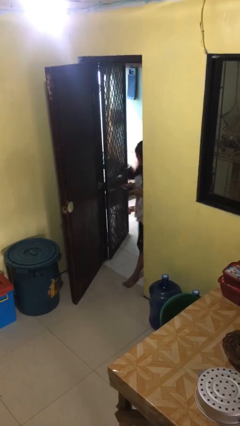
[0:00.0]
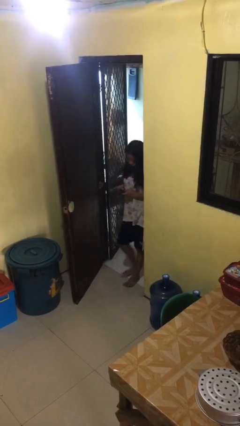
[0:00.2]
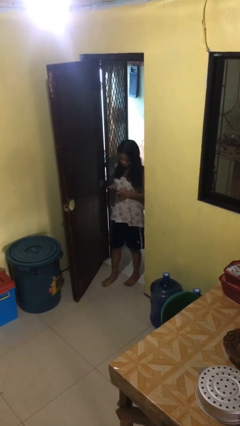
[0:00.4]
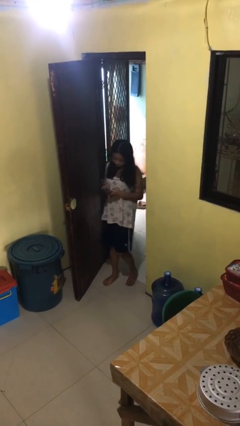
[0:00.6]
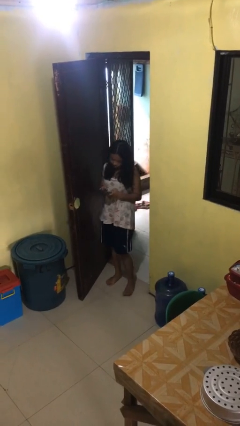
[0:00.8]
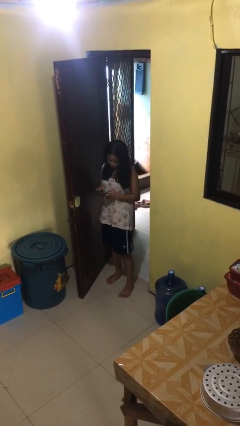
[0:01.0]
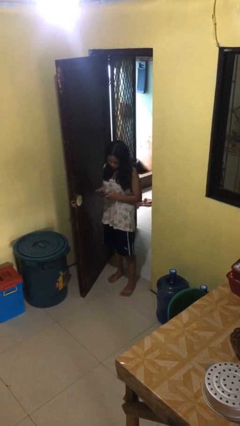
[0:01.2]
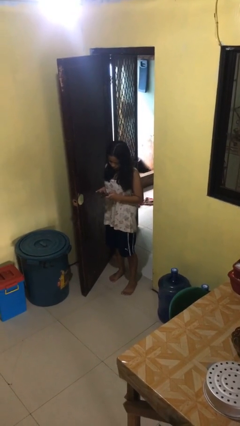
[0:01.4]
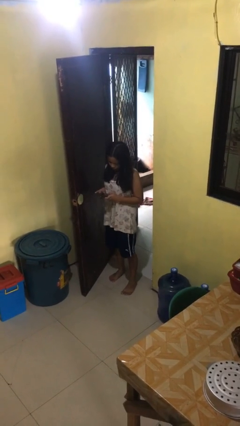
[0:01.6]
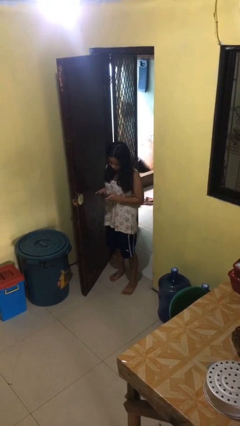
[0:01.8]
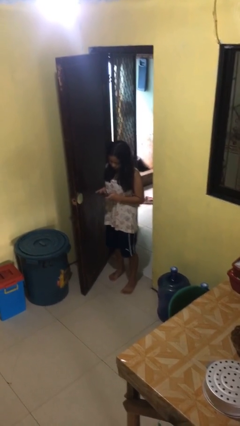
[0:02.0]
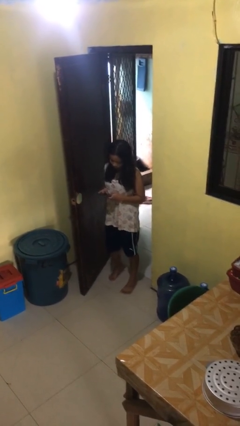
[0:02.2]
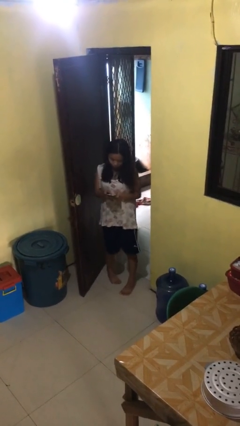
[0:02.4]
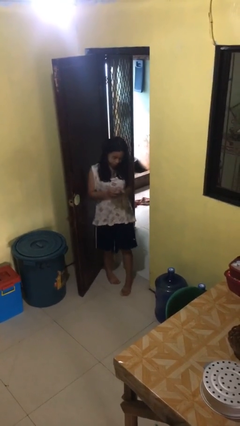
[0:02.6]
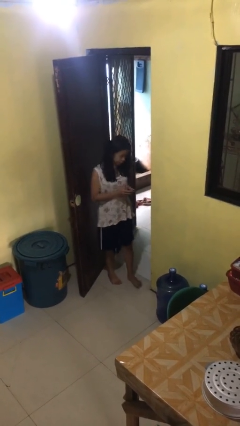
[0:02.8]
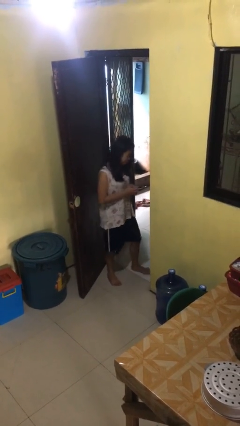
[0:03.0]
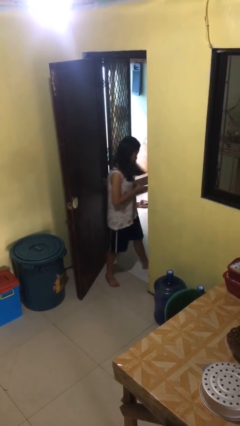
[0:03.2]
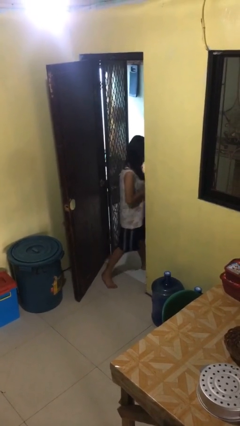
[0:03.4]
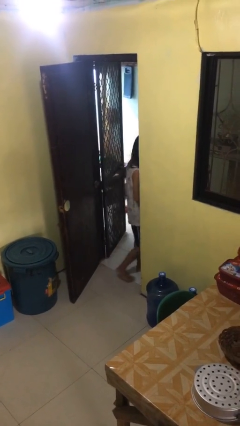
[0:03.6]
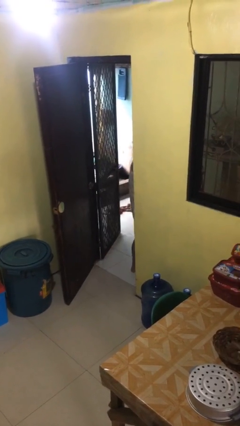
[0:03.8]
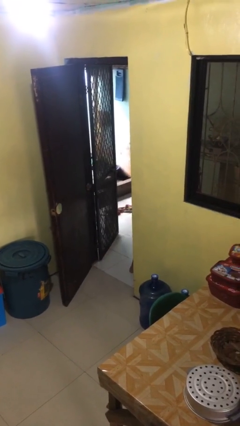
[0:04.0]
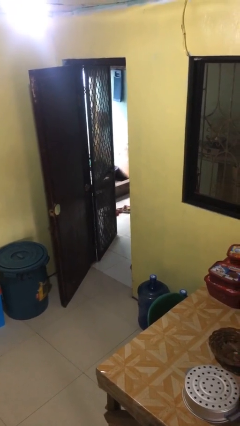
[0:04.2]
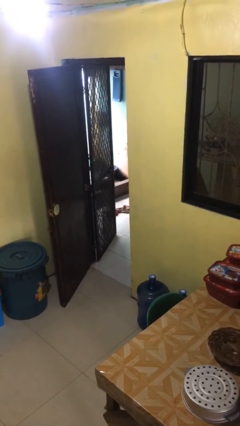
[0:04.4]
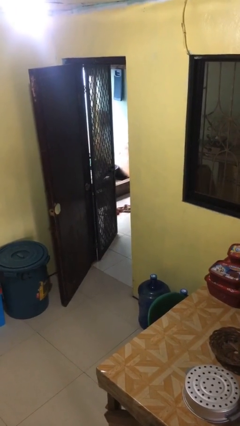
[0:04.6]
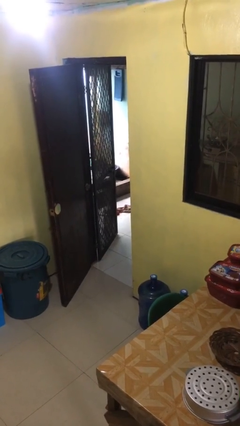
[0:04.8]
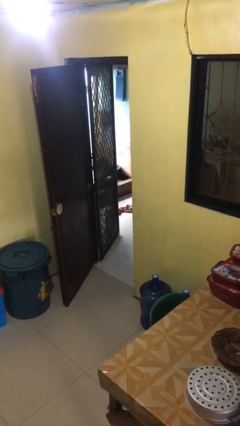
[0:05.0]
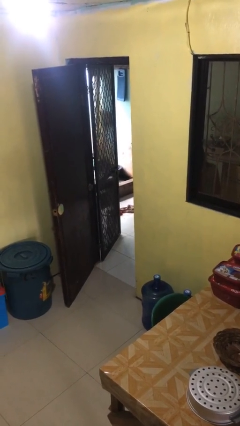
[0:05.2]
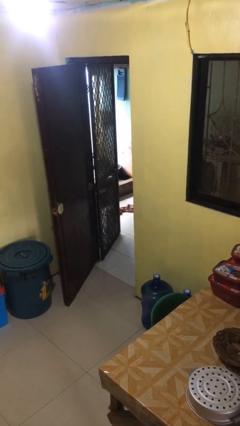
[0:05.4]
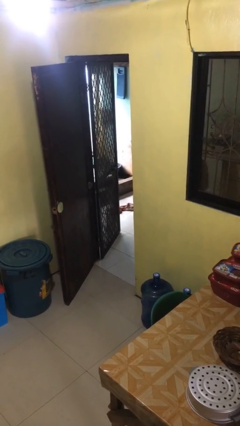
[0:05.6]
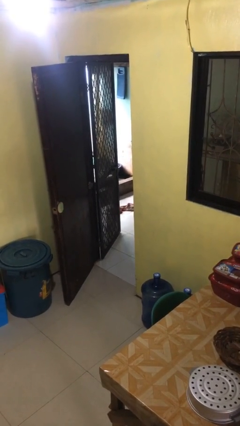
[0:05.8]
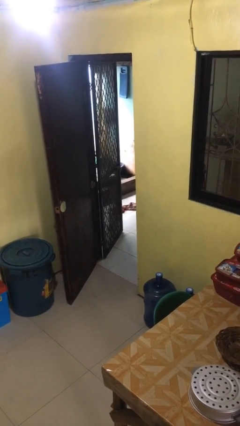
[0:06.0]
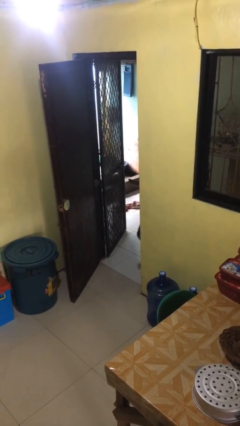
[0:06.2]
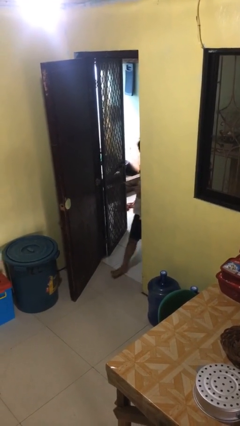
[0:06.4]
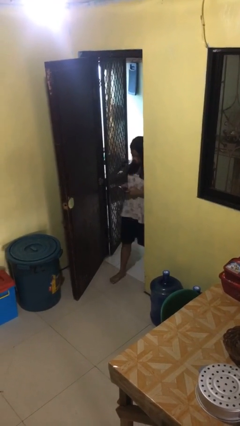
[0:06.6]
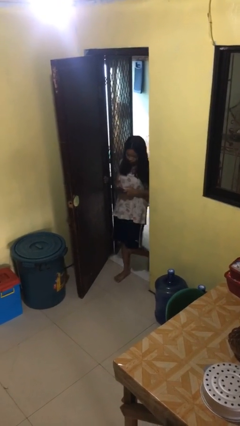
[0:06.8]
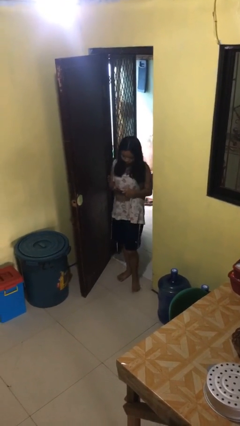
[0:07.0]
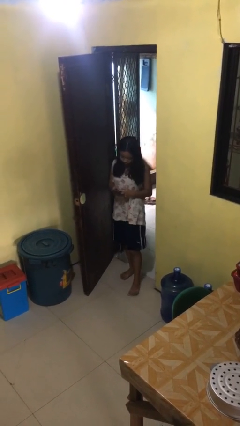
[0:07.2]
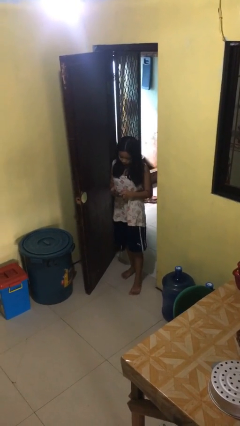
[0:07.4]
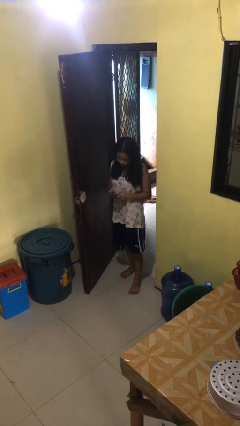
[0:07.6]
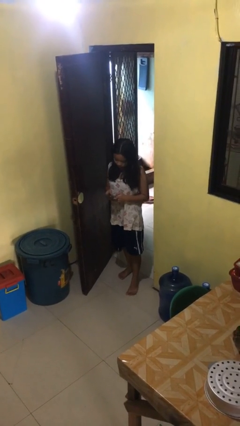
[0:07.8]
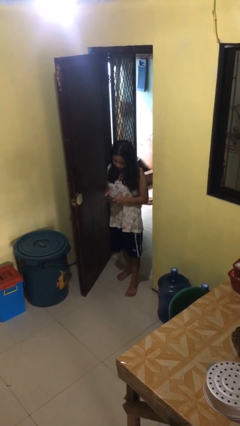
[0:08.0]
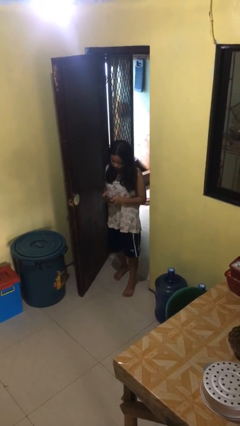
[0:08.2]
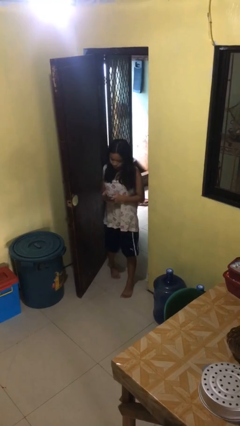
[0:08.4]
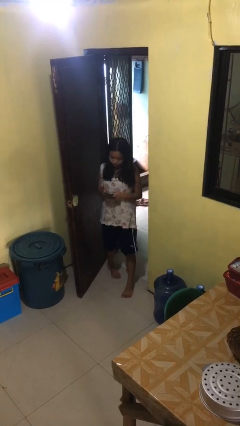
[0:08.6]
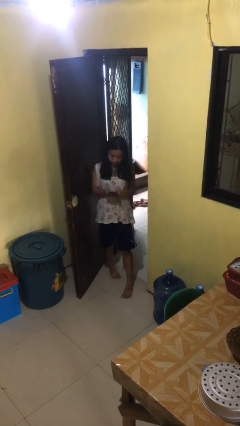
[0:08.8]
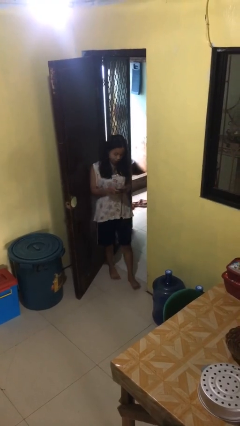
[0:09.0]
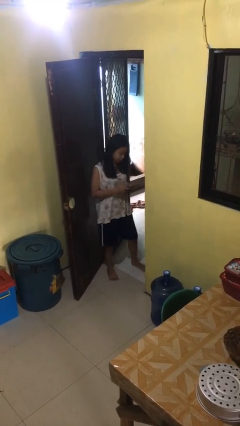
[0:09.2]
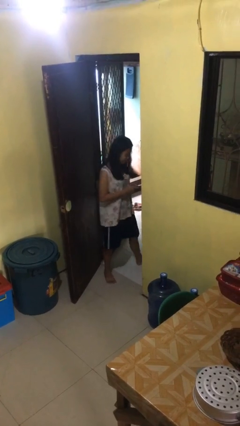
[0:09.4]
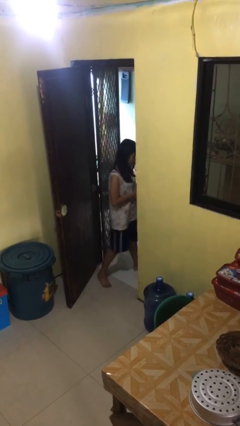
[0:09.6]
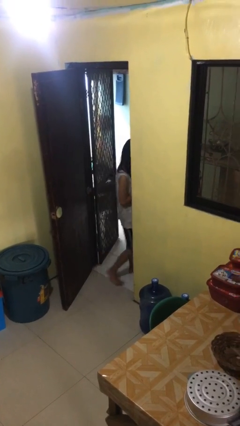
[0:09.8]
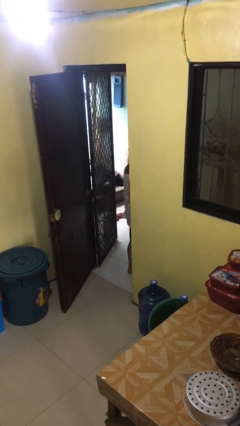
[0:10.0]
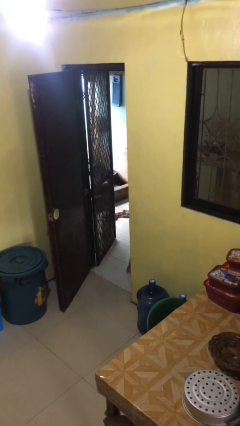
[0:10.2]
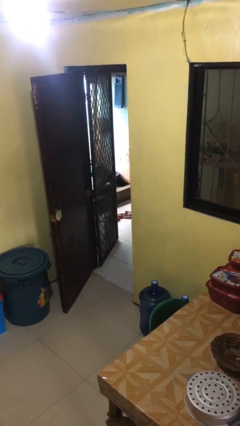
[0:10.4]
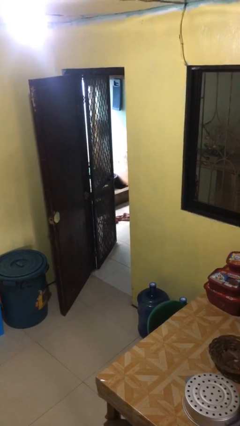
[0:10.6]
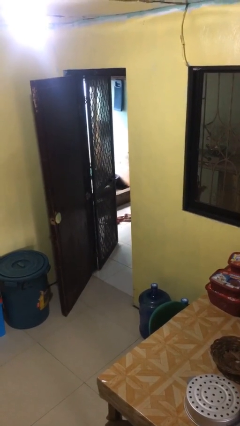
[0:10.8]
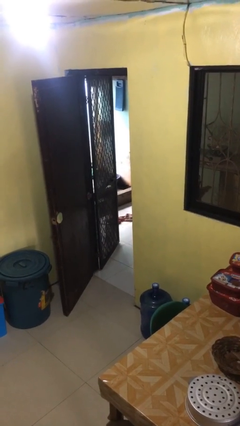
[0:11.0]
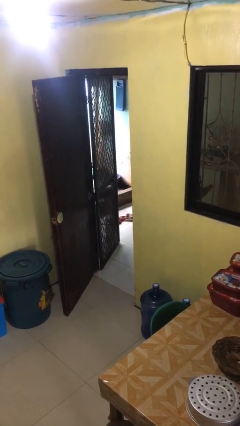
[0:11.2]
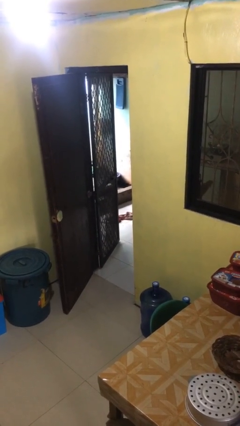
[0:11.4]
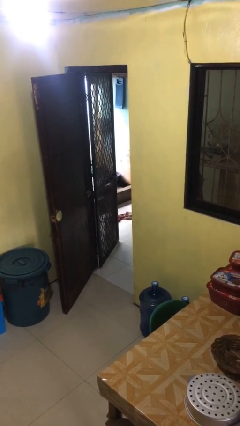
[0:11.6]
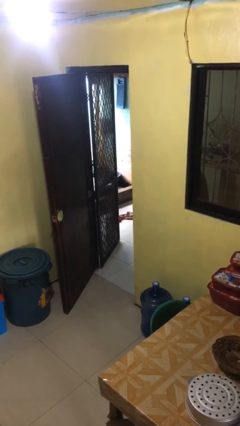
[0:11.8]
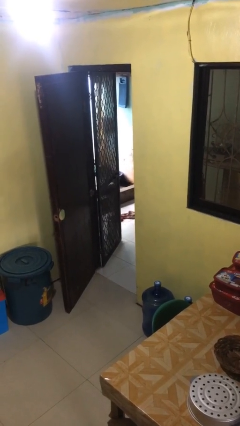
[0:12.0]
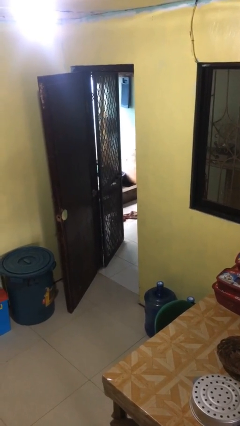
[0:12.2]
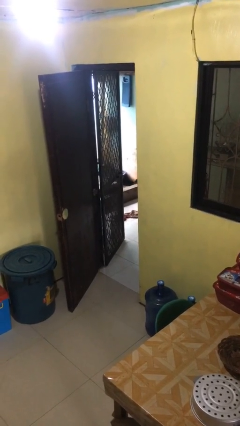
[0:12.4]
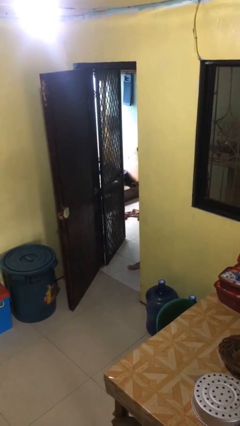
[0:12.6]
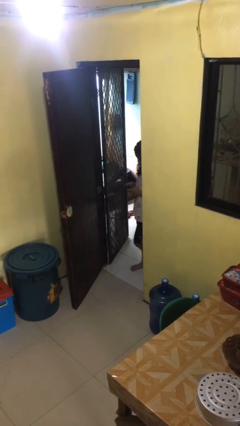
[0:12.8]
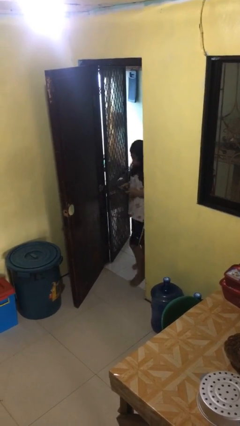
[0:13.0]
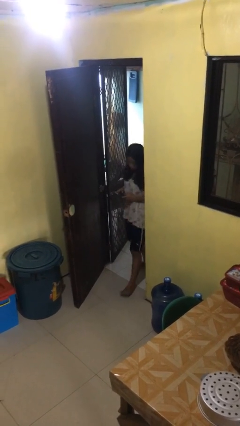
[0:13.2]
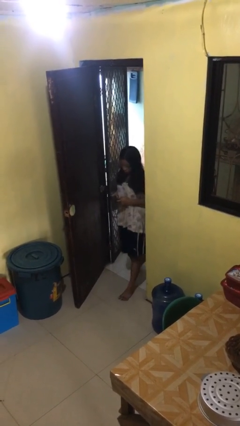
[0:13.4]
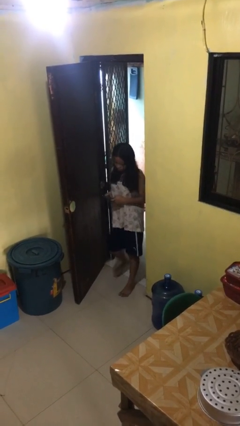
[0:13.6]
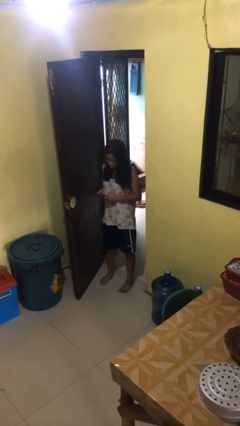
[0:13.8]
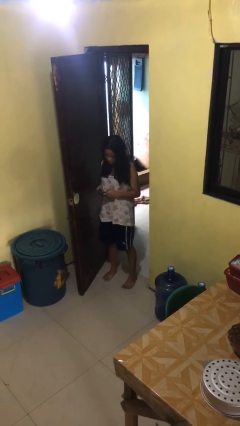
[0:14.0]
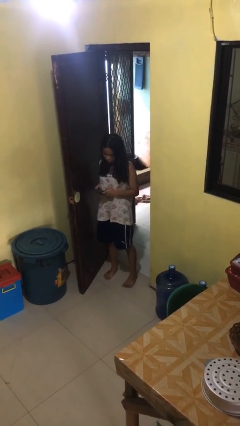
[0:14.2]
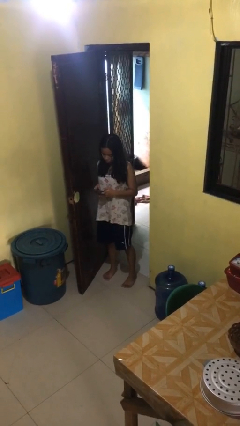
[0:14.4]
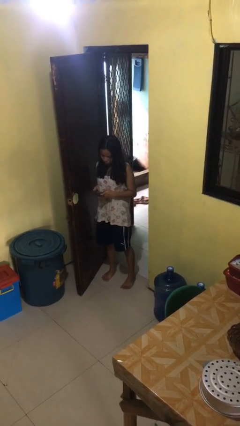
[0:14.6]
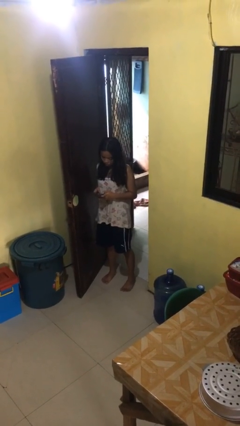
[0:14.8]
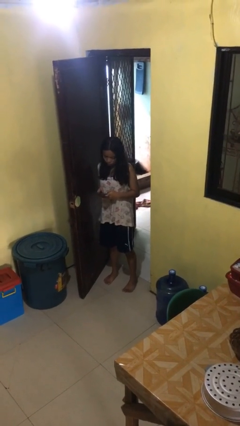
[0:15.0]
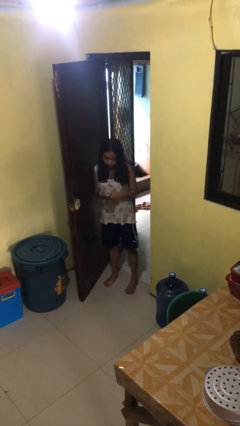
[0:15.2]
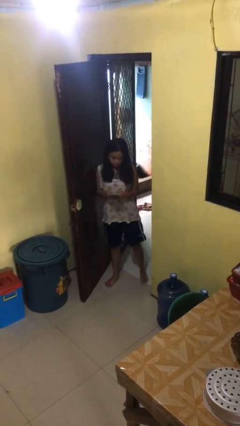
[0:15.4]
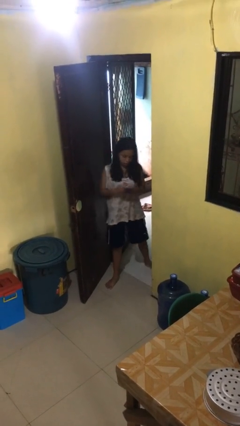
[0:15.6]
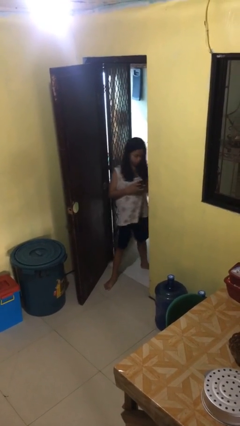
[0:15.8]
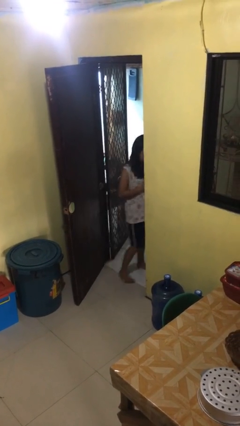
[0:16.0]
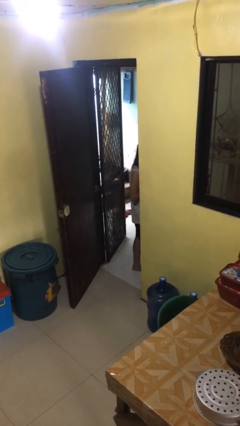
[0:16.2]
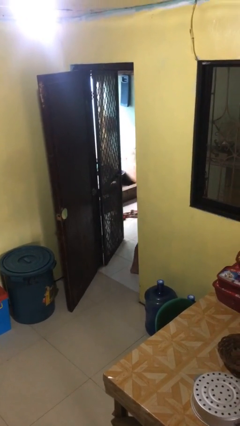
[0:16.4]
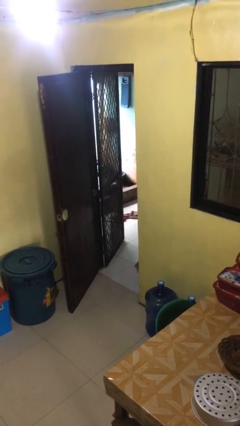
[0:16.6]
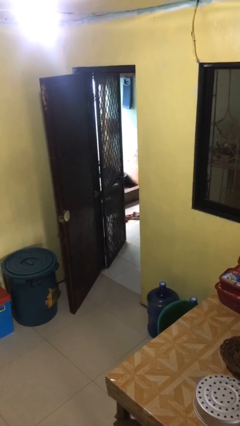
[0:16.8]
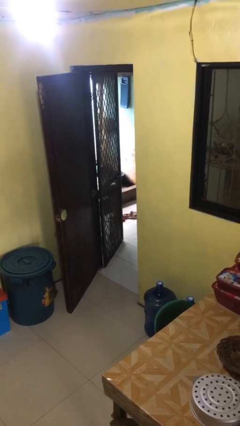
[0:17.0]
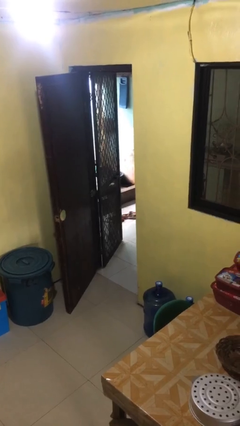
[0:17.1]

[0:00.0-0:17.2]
person texts on phone

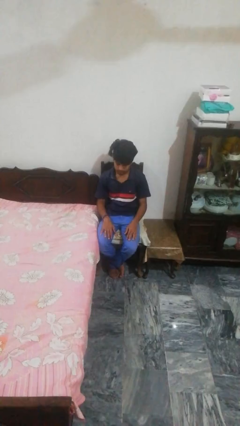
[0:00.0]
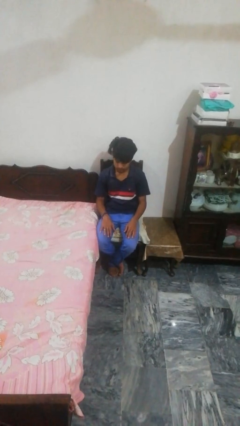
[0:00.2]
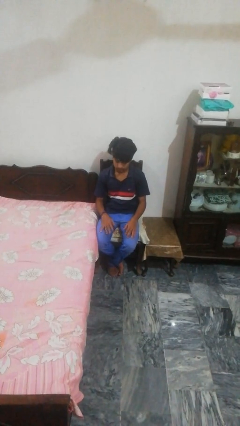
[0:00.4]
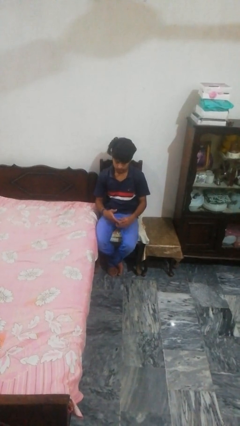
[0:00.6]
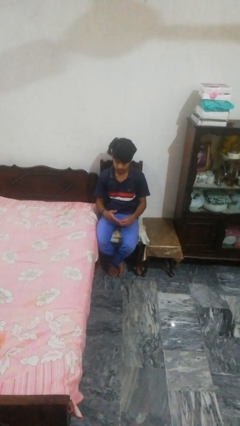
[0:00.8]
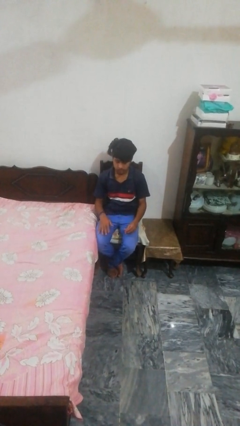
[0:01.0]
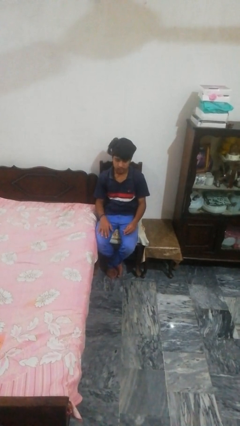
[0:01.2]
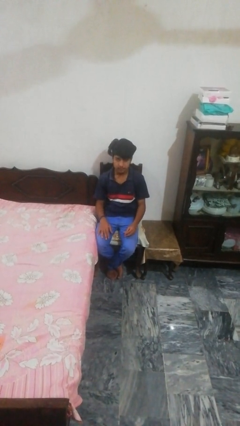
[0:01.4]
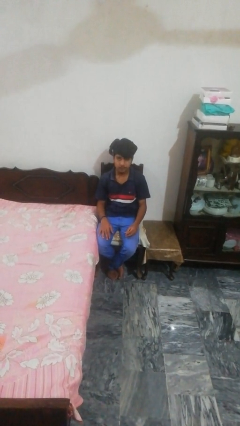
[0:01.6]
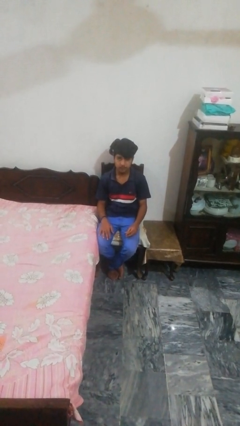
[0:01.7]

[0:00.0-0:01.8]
person takes off ring
